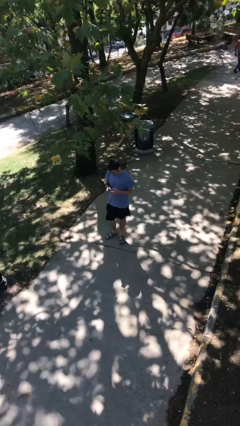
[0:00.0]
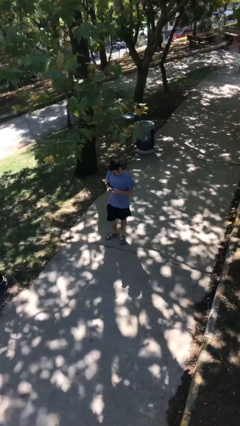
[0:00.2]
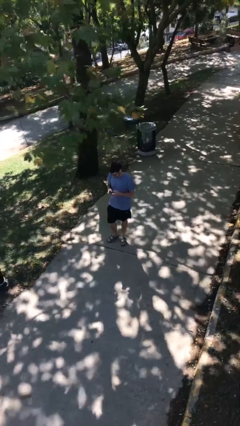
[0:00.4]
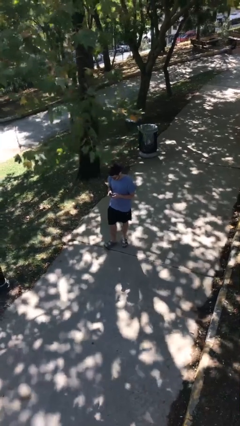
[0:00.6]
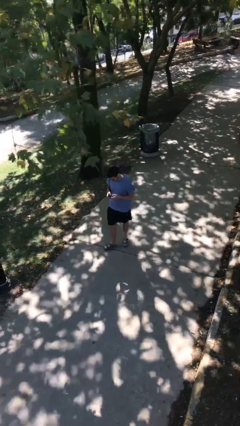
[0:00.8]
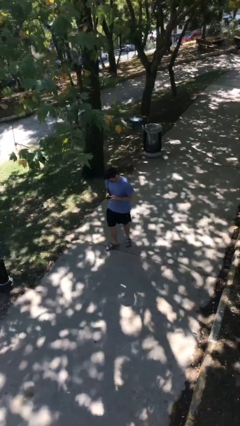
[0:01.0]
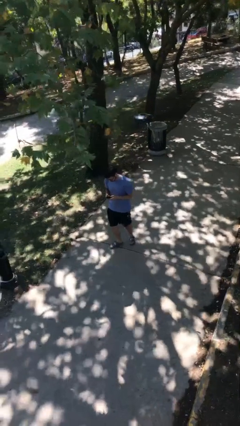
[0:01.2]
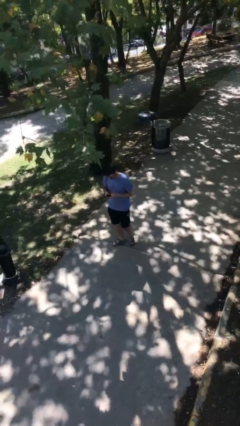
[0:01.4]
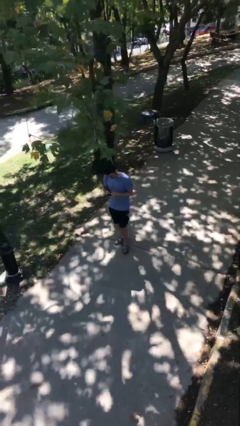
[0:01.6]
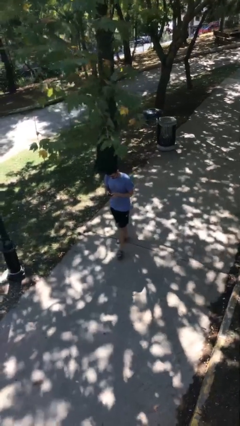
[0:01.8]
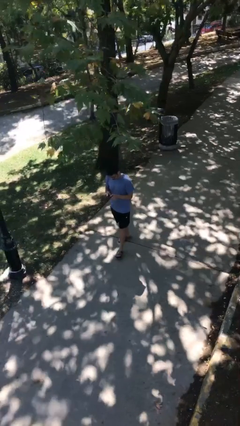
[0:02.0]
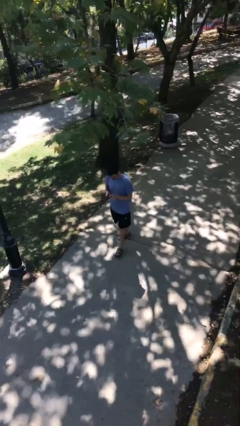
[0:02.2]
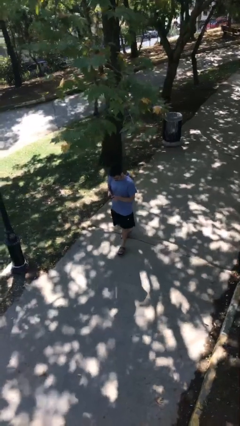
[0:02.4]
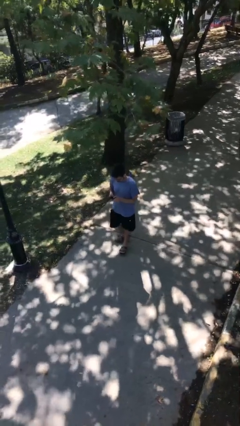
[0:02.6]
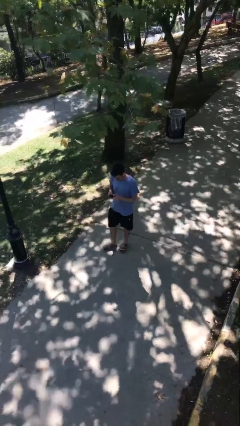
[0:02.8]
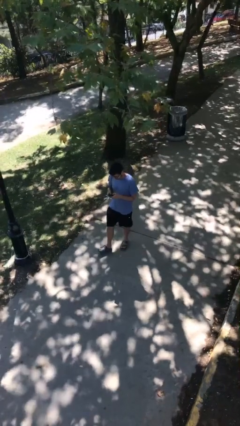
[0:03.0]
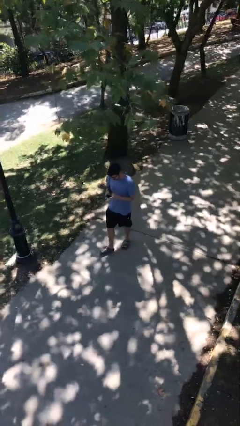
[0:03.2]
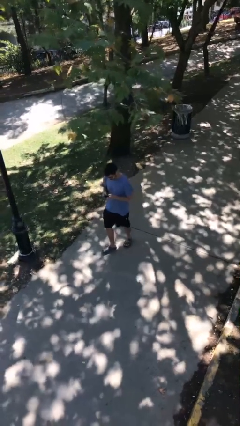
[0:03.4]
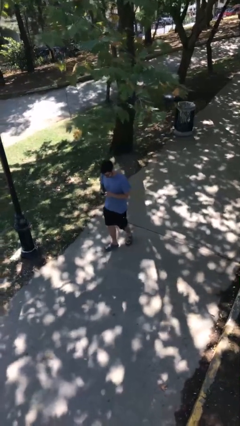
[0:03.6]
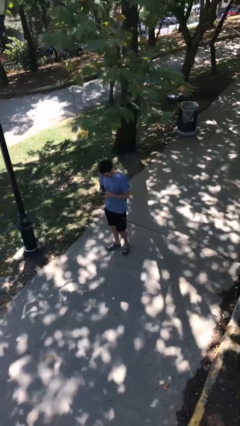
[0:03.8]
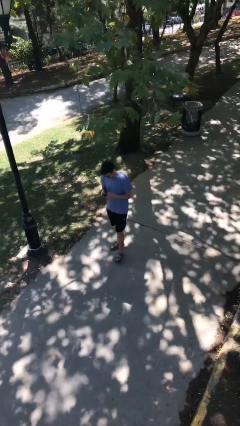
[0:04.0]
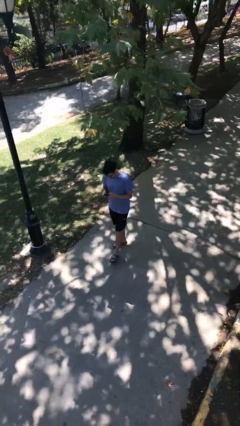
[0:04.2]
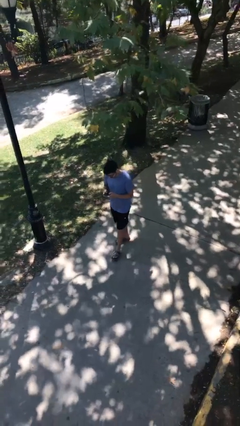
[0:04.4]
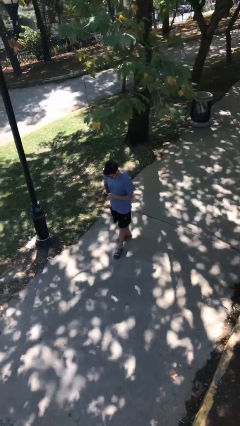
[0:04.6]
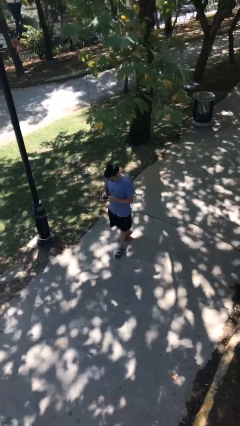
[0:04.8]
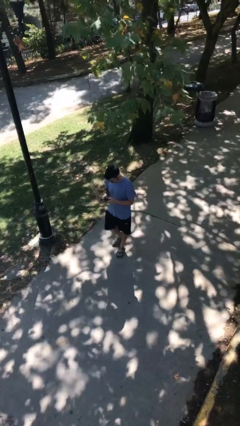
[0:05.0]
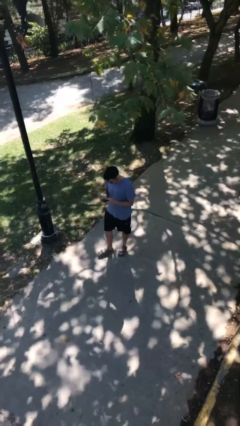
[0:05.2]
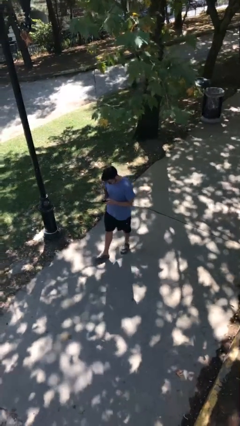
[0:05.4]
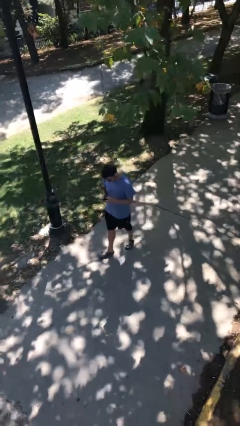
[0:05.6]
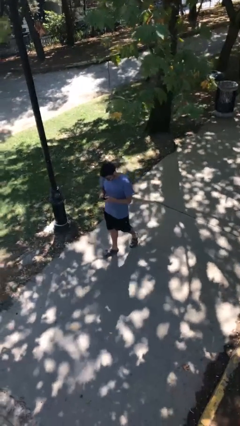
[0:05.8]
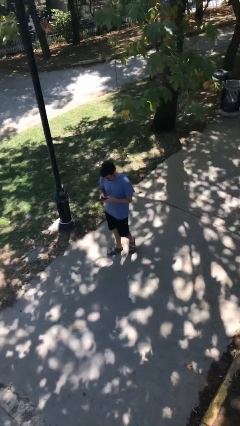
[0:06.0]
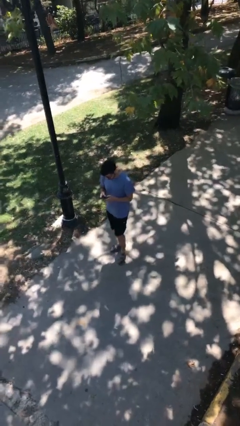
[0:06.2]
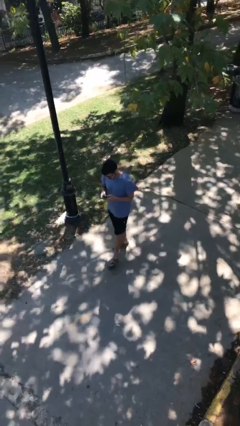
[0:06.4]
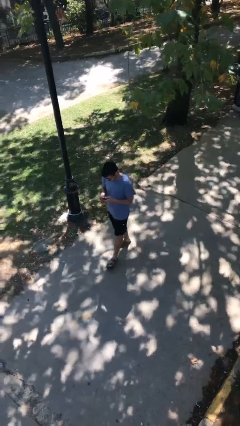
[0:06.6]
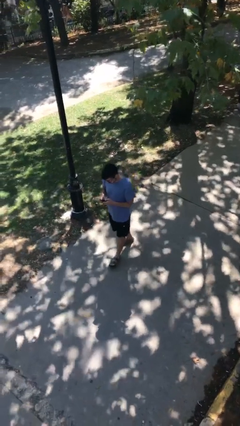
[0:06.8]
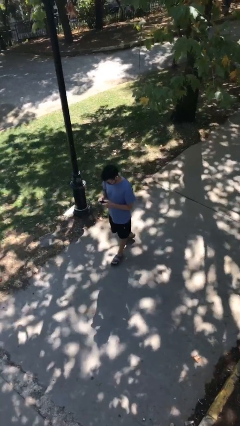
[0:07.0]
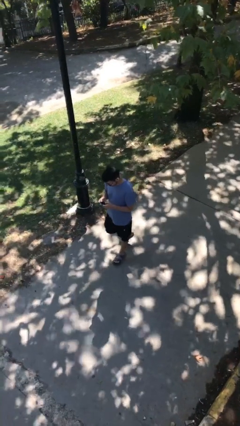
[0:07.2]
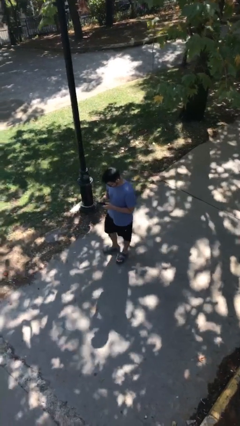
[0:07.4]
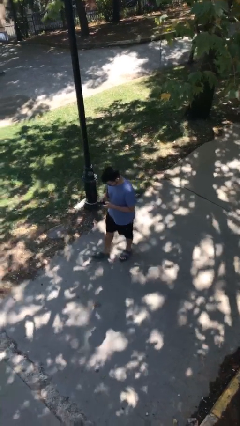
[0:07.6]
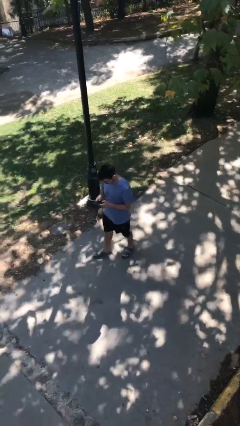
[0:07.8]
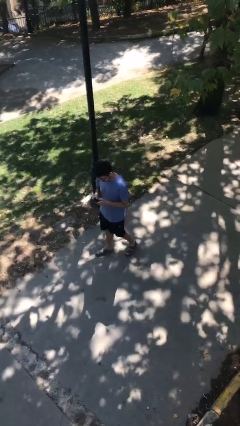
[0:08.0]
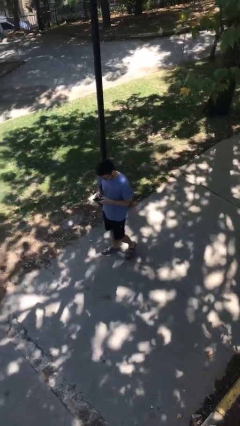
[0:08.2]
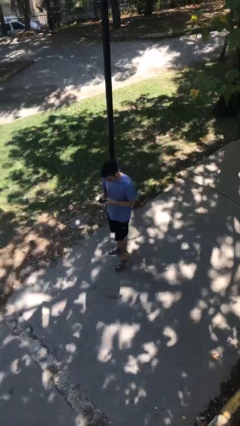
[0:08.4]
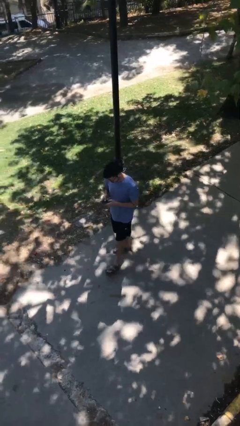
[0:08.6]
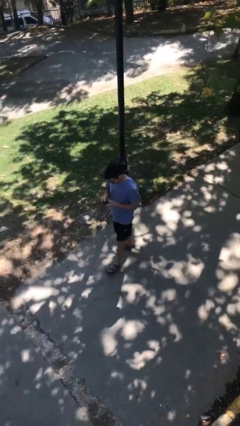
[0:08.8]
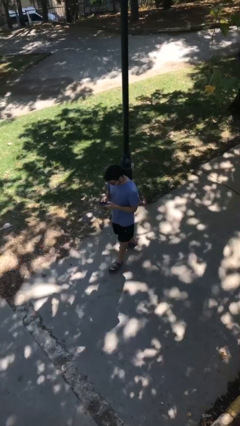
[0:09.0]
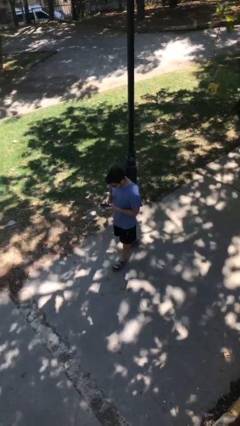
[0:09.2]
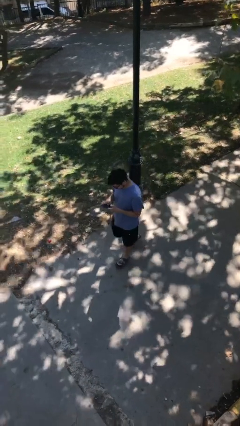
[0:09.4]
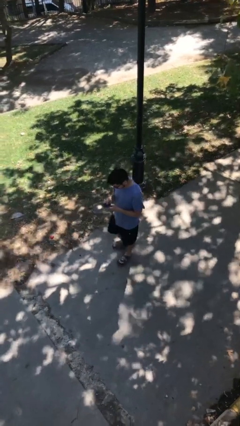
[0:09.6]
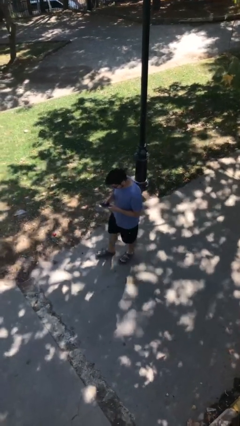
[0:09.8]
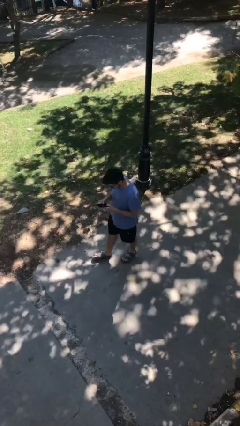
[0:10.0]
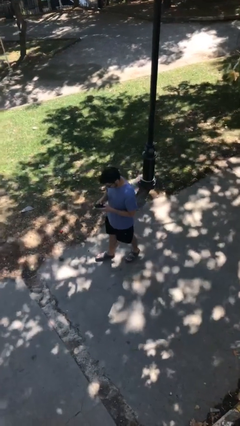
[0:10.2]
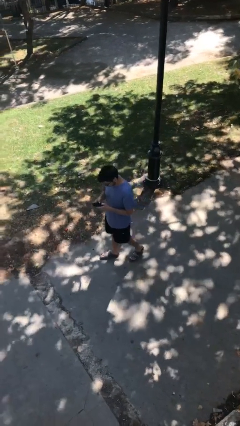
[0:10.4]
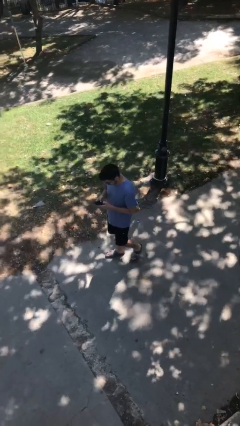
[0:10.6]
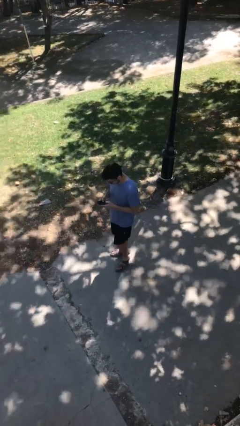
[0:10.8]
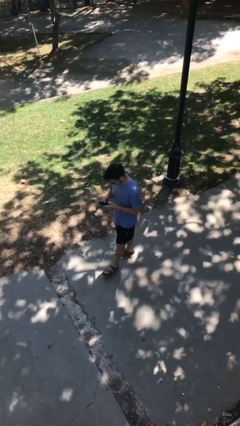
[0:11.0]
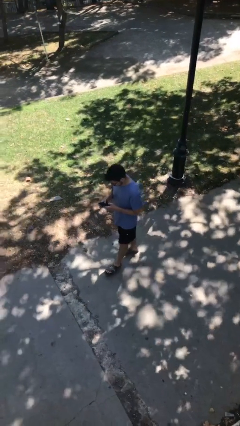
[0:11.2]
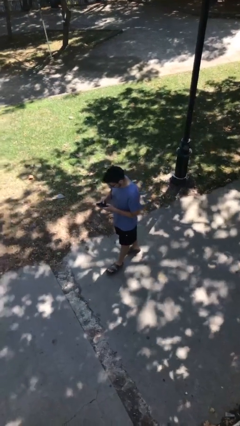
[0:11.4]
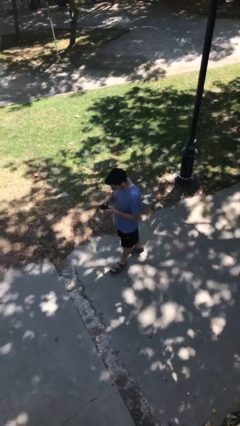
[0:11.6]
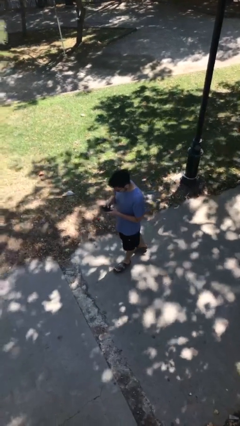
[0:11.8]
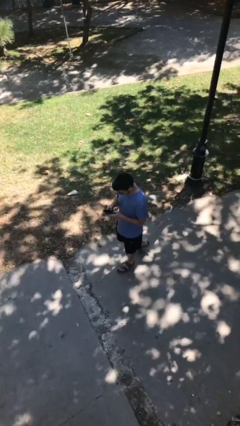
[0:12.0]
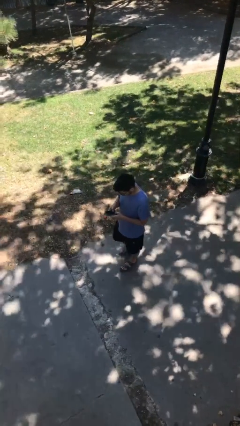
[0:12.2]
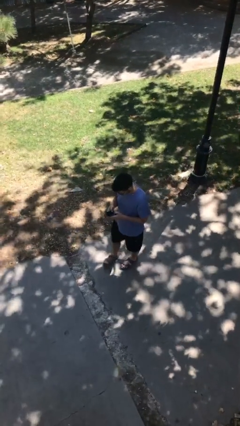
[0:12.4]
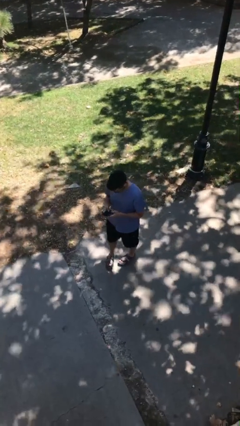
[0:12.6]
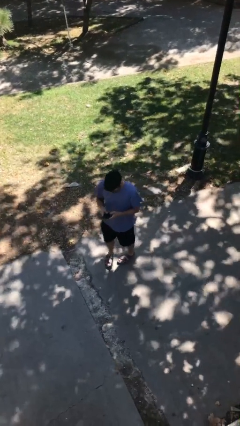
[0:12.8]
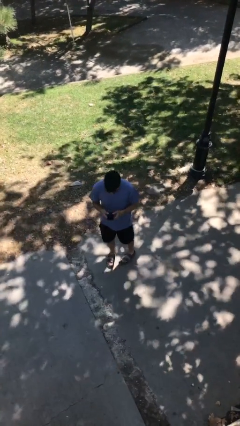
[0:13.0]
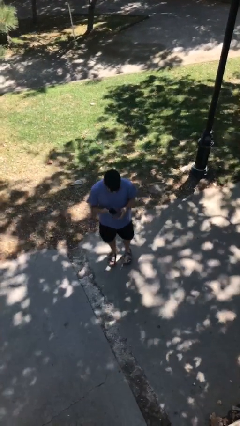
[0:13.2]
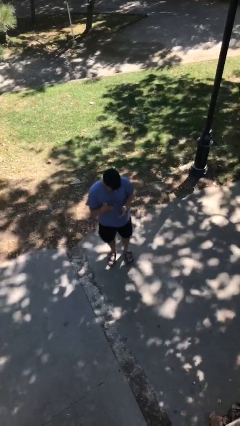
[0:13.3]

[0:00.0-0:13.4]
person texts on phone

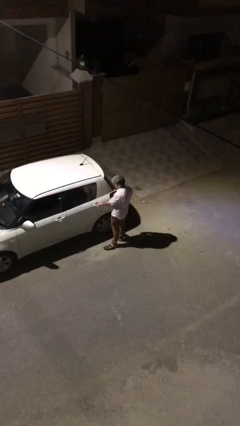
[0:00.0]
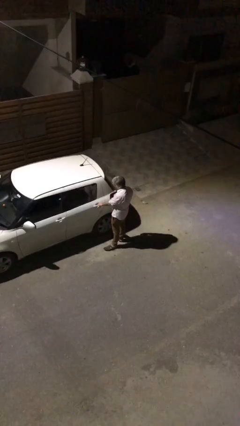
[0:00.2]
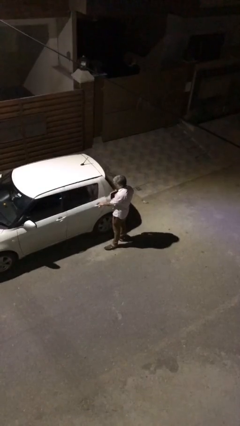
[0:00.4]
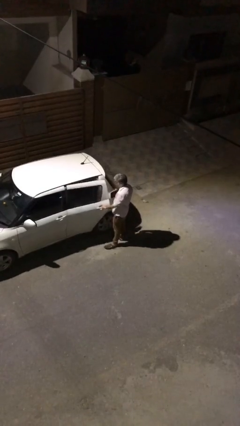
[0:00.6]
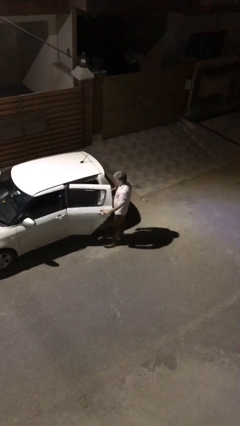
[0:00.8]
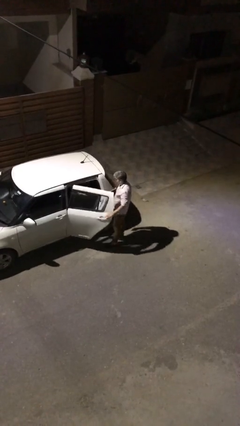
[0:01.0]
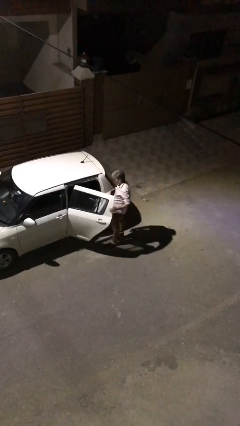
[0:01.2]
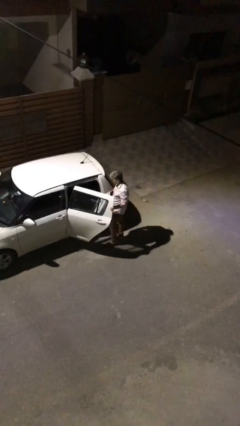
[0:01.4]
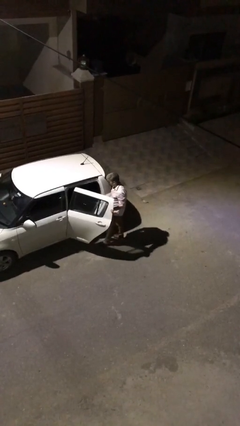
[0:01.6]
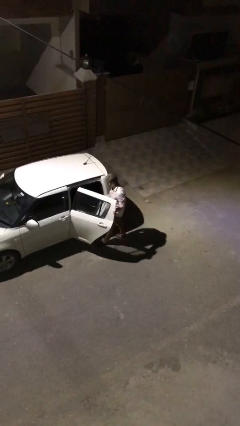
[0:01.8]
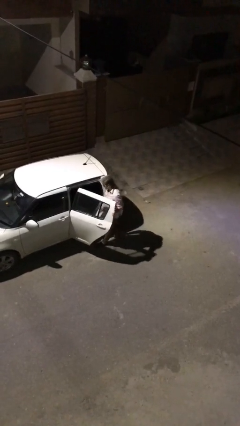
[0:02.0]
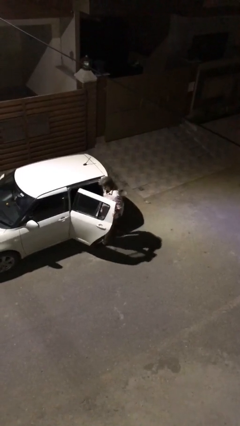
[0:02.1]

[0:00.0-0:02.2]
person opens car door

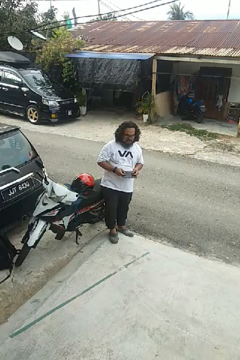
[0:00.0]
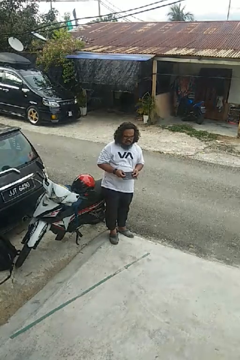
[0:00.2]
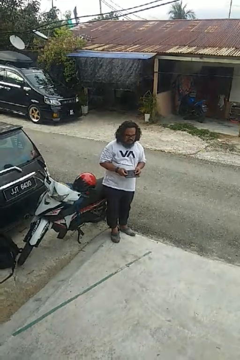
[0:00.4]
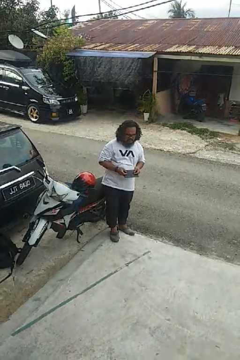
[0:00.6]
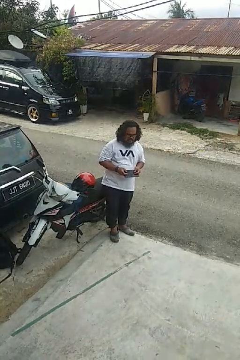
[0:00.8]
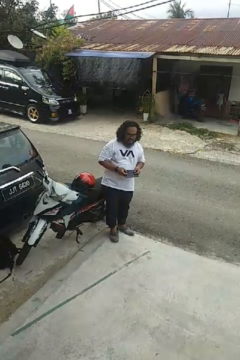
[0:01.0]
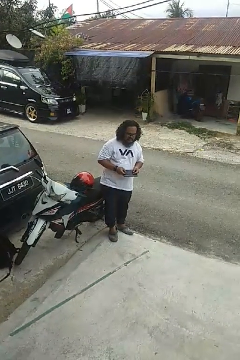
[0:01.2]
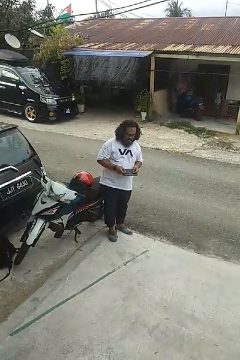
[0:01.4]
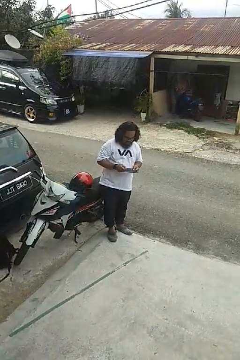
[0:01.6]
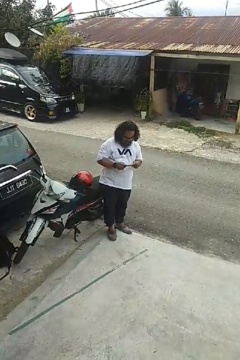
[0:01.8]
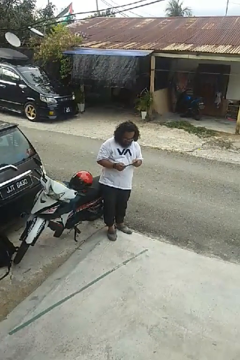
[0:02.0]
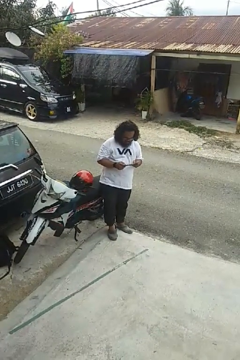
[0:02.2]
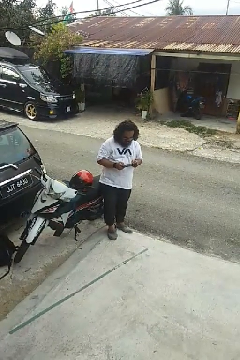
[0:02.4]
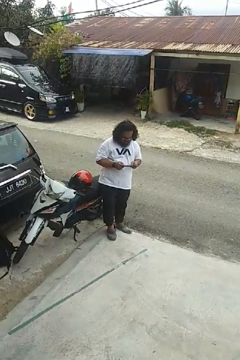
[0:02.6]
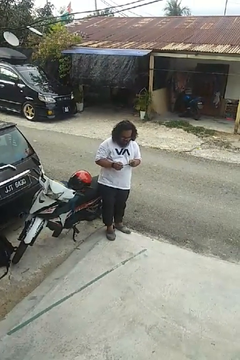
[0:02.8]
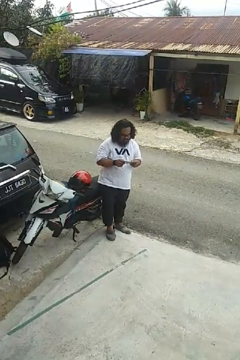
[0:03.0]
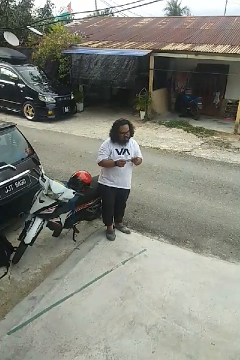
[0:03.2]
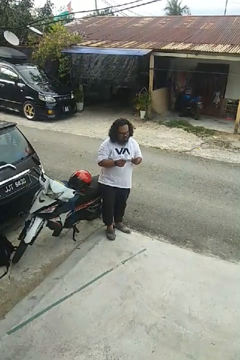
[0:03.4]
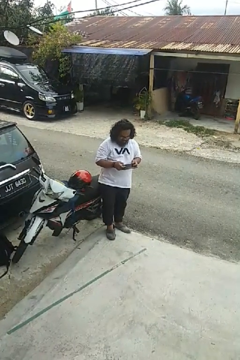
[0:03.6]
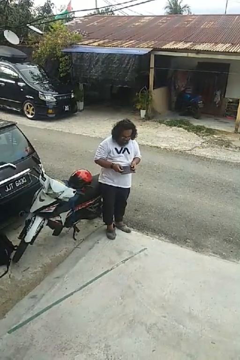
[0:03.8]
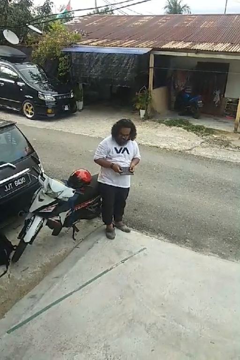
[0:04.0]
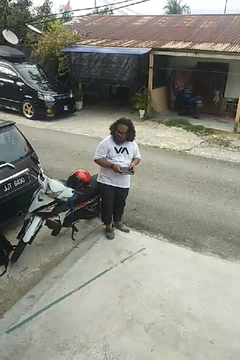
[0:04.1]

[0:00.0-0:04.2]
person interacts with handheld game
